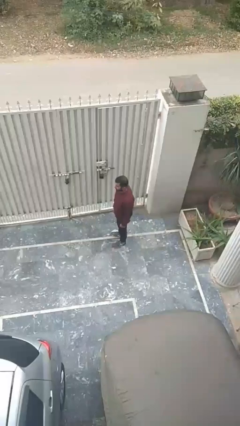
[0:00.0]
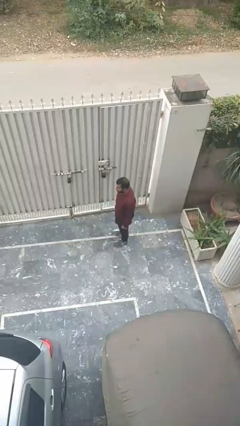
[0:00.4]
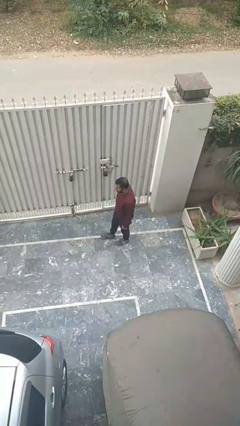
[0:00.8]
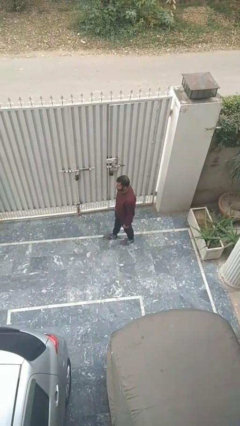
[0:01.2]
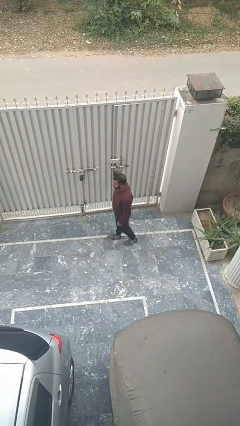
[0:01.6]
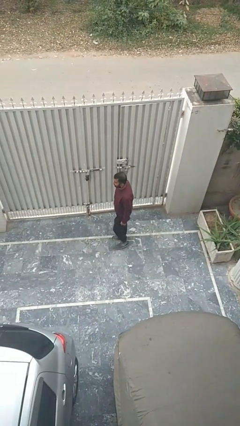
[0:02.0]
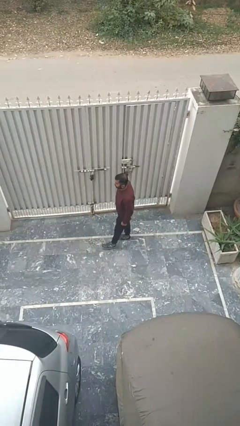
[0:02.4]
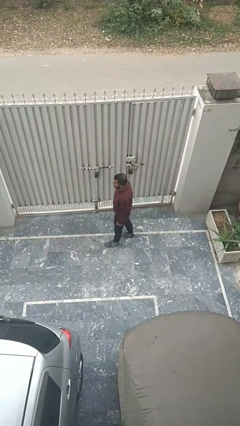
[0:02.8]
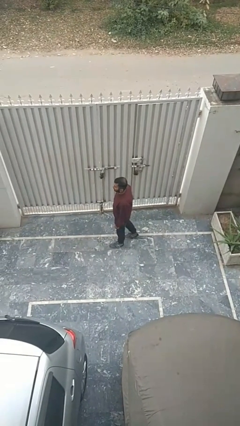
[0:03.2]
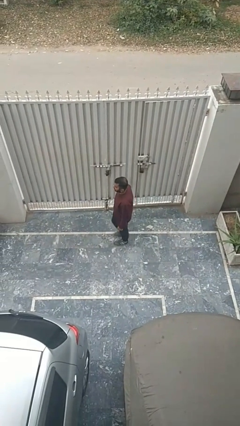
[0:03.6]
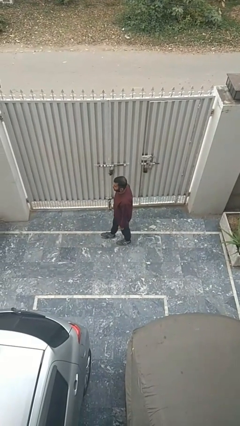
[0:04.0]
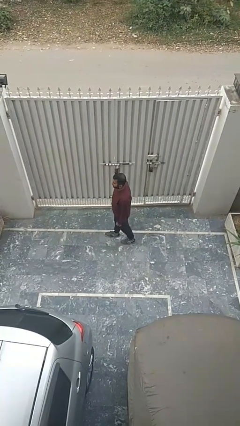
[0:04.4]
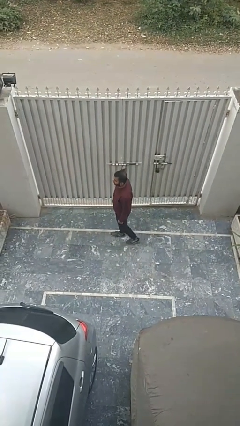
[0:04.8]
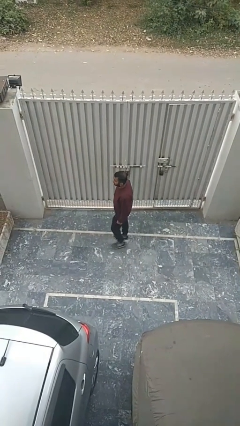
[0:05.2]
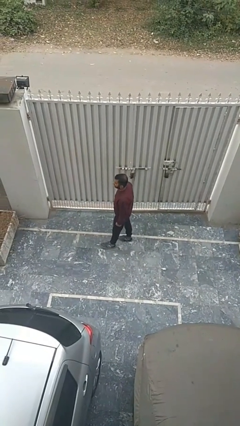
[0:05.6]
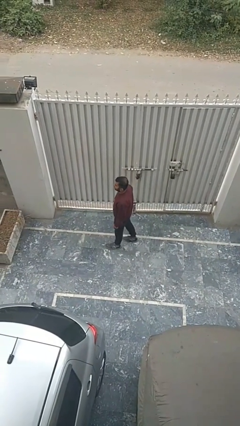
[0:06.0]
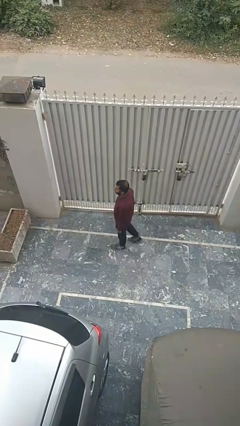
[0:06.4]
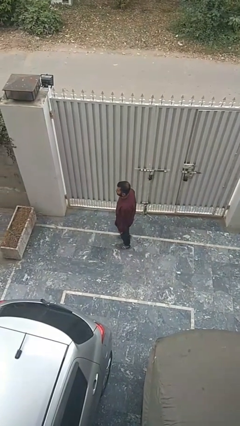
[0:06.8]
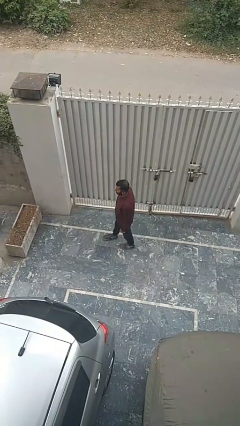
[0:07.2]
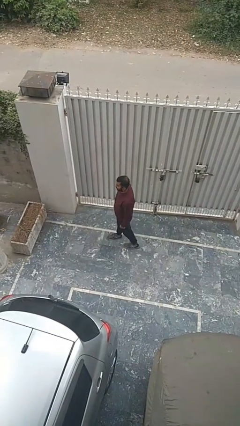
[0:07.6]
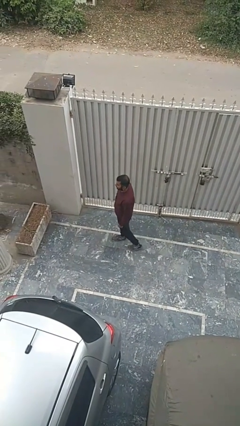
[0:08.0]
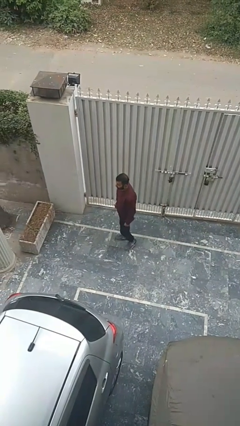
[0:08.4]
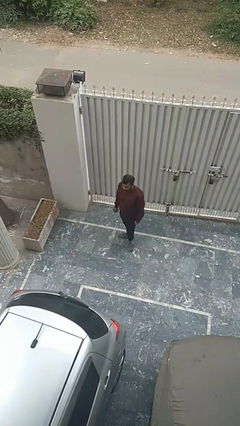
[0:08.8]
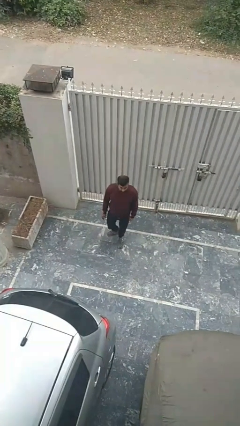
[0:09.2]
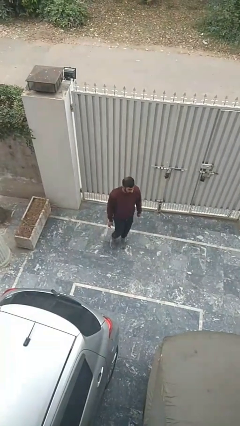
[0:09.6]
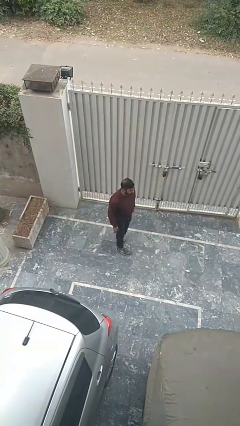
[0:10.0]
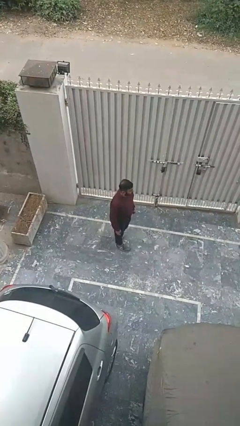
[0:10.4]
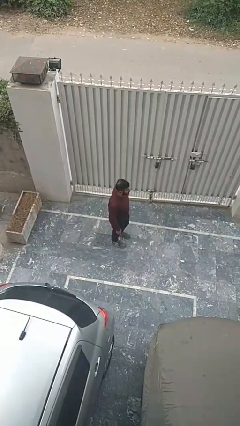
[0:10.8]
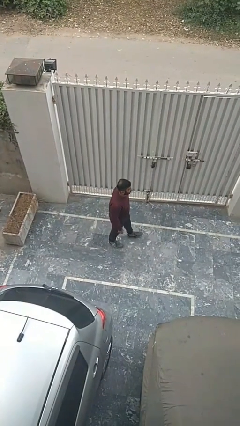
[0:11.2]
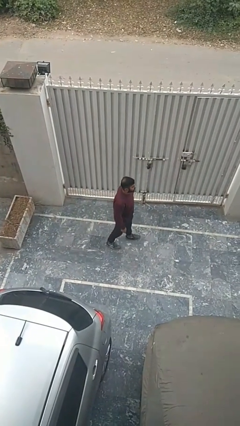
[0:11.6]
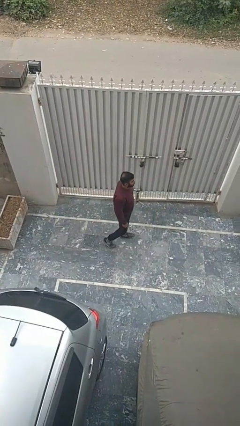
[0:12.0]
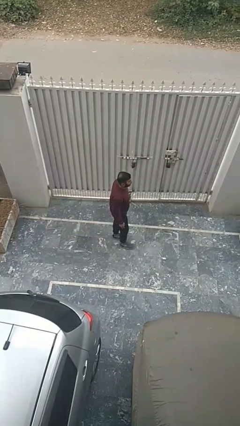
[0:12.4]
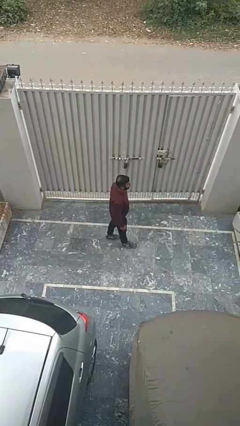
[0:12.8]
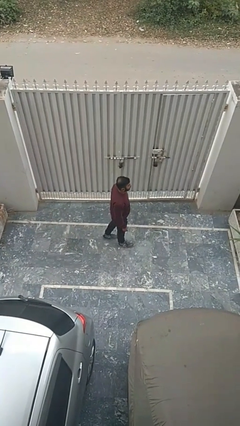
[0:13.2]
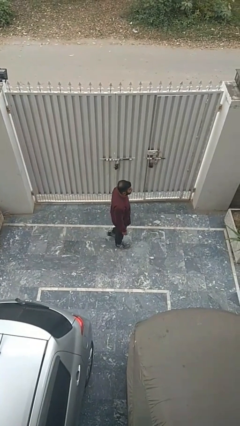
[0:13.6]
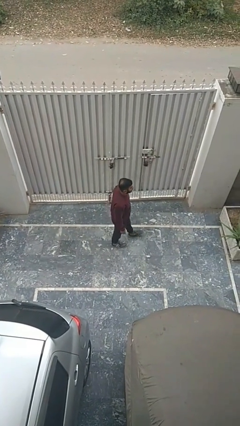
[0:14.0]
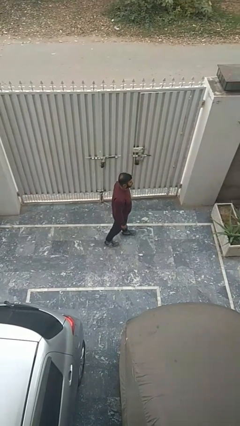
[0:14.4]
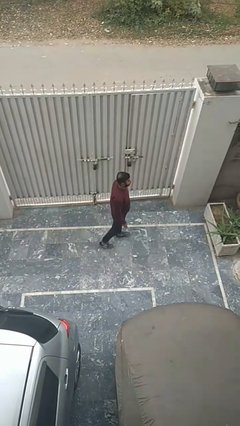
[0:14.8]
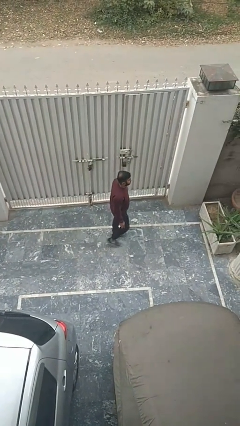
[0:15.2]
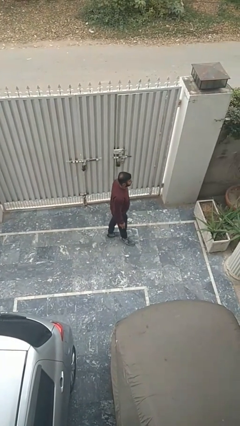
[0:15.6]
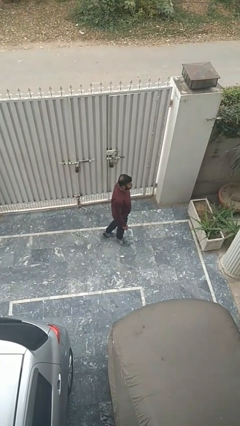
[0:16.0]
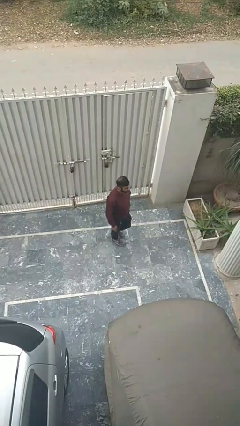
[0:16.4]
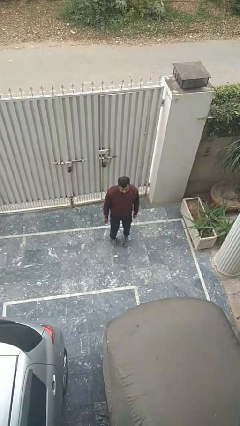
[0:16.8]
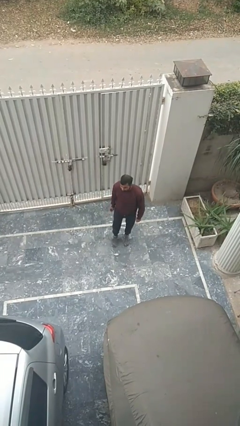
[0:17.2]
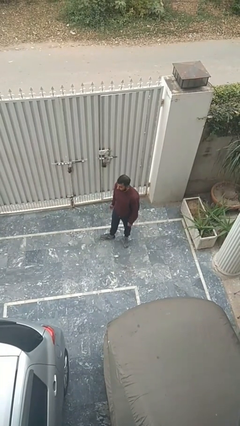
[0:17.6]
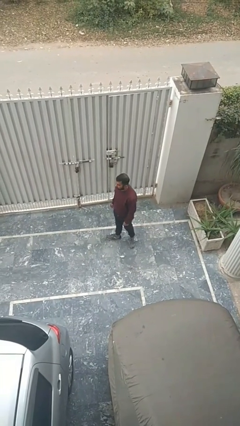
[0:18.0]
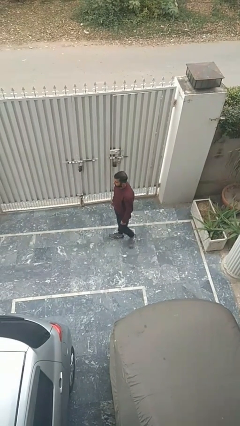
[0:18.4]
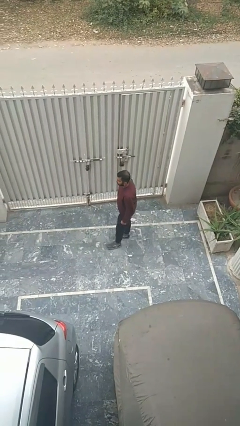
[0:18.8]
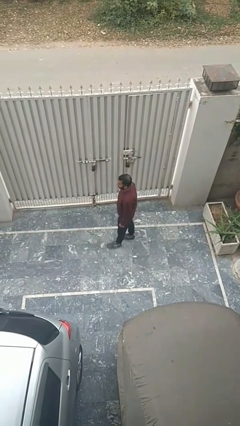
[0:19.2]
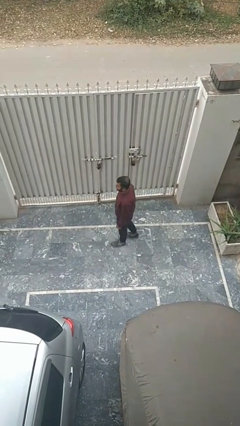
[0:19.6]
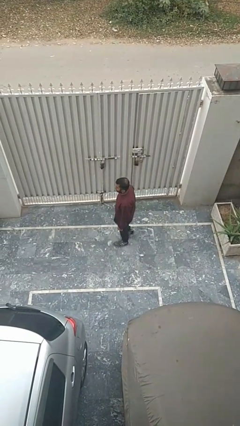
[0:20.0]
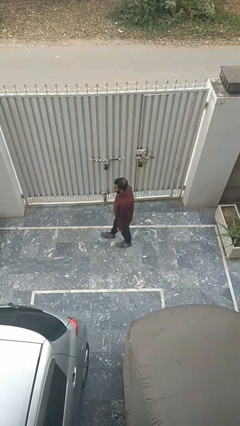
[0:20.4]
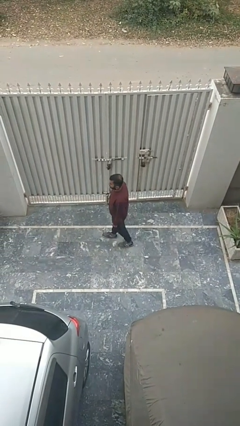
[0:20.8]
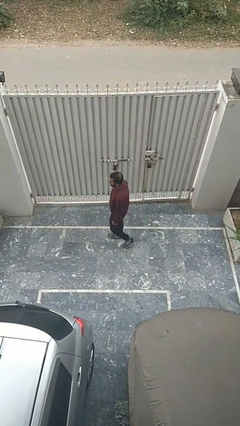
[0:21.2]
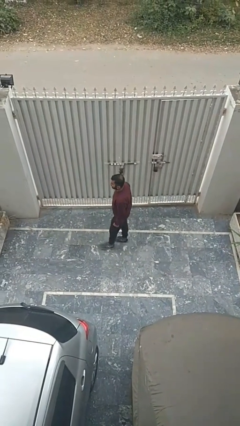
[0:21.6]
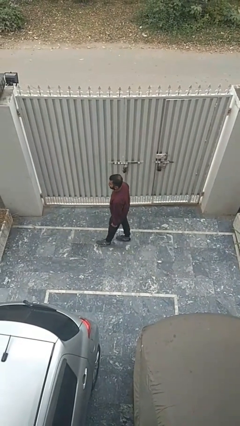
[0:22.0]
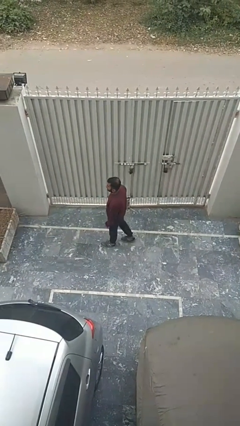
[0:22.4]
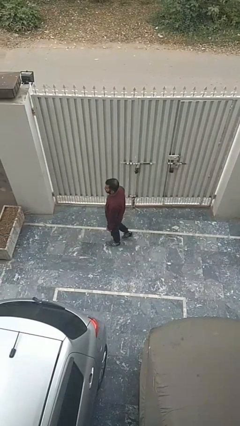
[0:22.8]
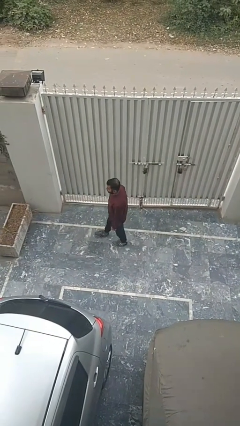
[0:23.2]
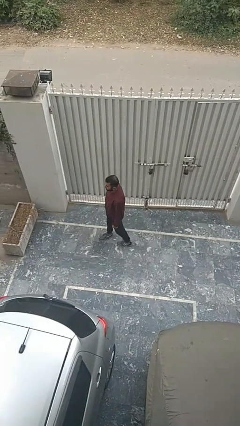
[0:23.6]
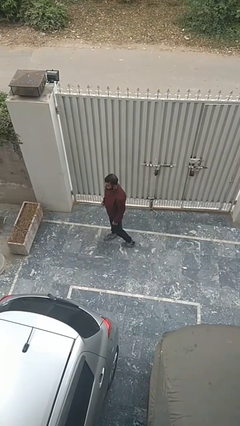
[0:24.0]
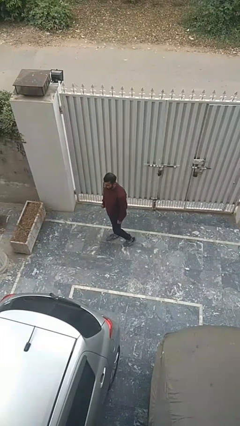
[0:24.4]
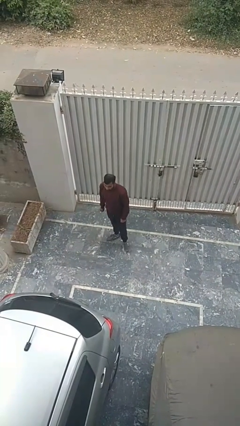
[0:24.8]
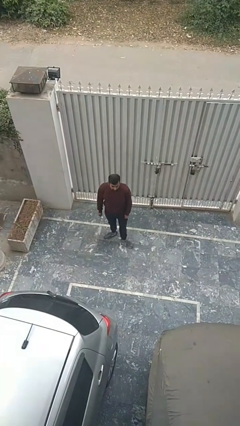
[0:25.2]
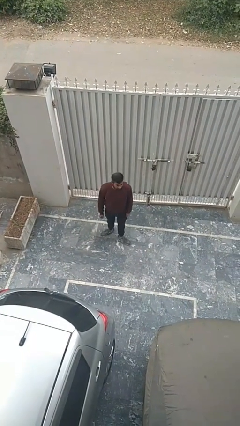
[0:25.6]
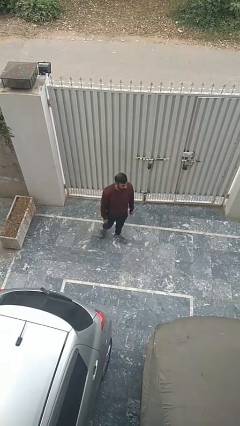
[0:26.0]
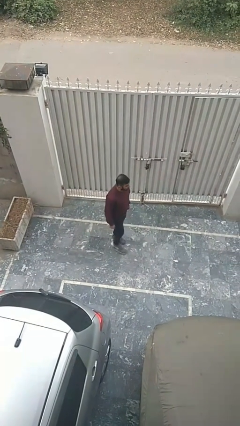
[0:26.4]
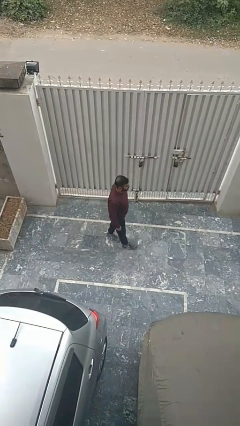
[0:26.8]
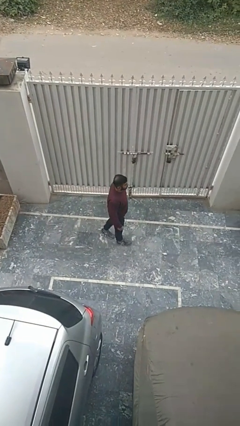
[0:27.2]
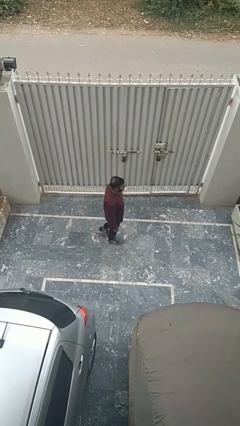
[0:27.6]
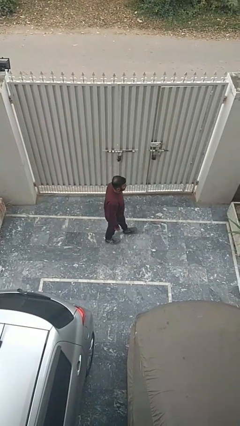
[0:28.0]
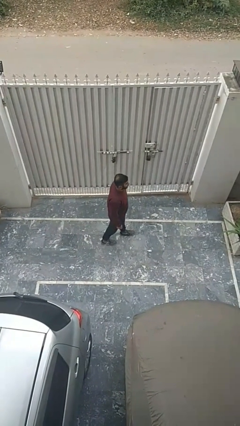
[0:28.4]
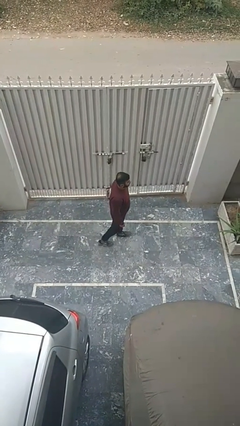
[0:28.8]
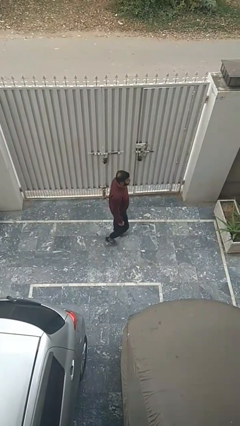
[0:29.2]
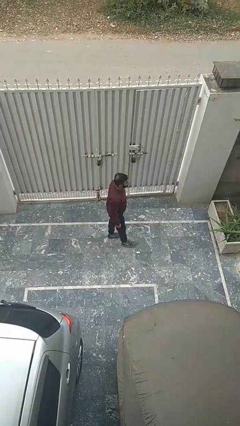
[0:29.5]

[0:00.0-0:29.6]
person walks

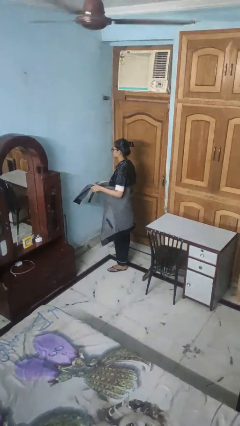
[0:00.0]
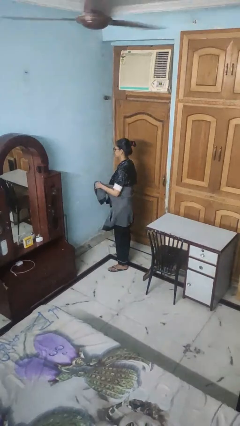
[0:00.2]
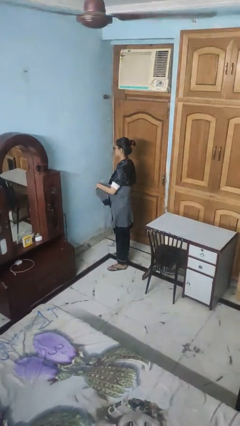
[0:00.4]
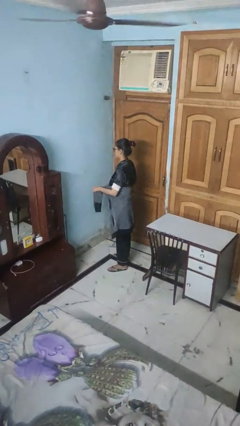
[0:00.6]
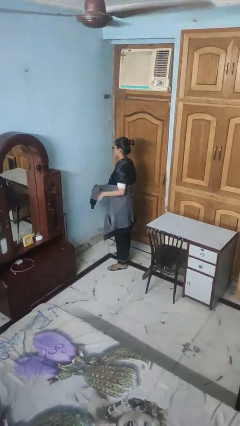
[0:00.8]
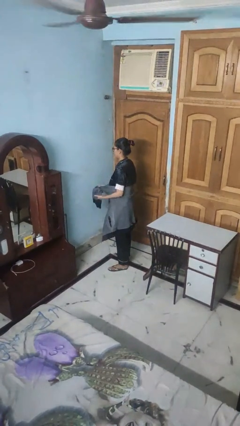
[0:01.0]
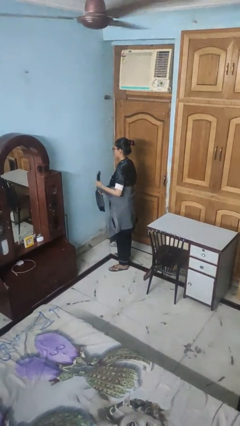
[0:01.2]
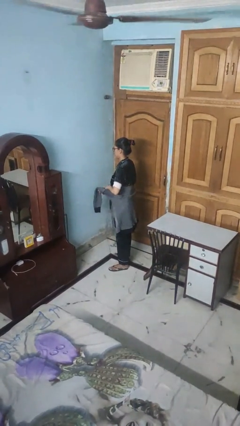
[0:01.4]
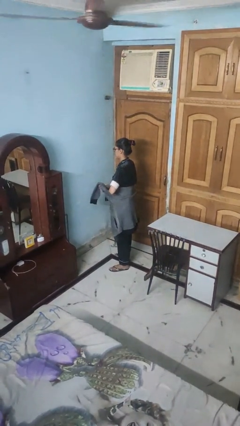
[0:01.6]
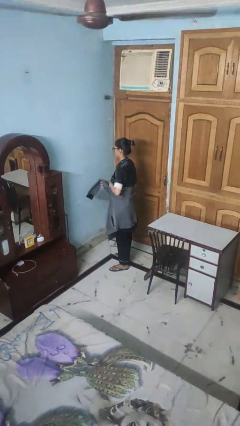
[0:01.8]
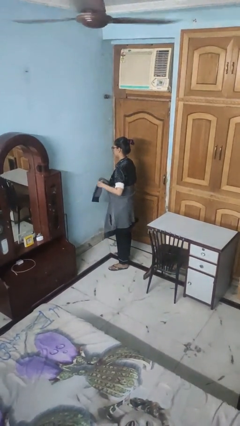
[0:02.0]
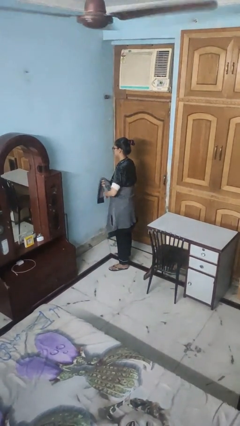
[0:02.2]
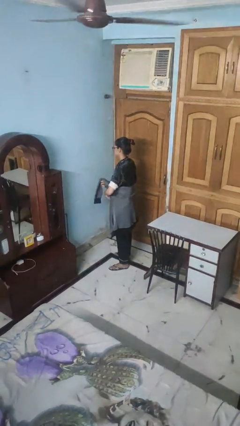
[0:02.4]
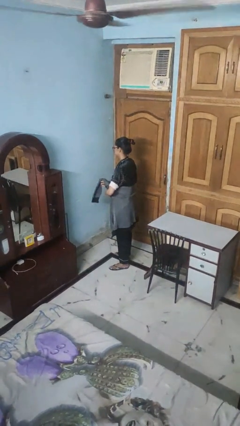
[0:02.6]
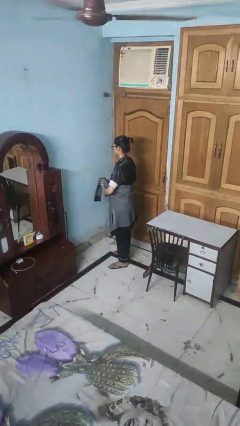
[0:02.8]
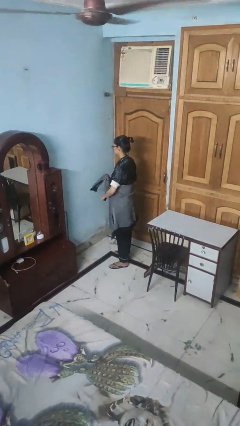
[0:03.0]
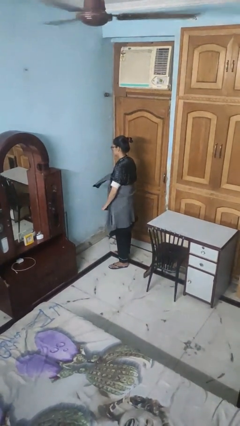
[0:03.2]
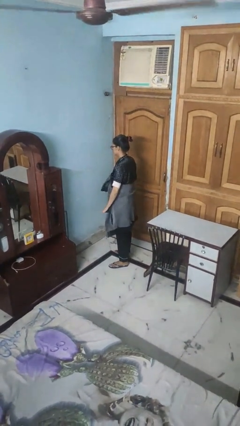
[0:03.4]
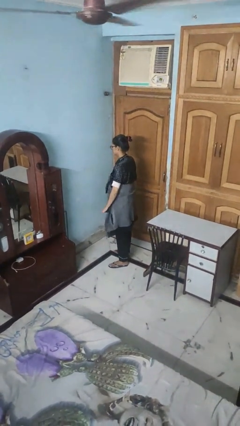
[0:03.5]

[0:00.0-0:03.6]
person ties jacket around waist

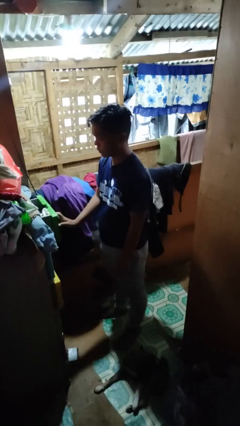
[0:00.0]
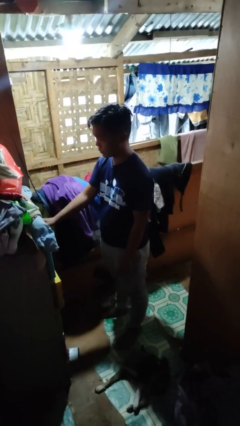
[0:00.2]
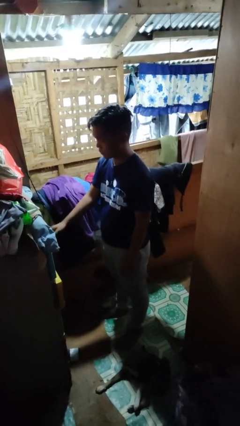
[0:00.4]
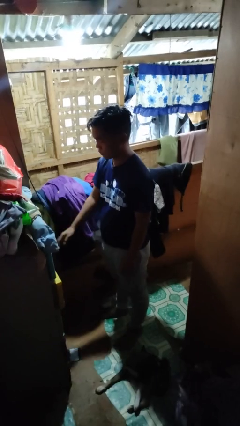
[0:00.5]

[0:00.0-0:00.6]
person closes dresser drawer
